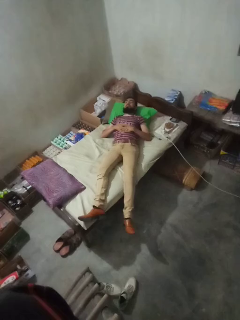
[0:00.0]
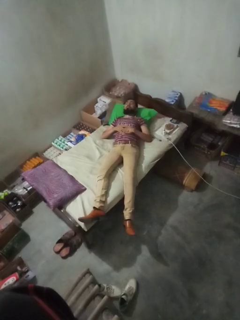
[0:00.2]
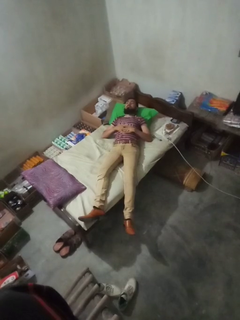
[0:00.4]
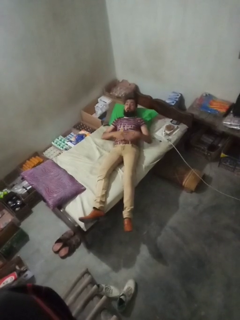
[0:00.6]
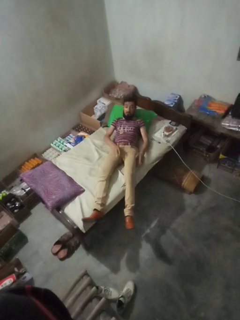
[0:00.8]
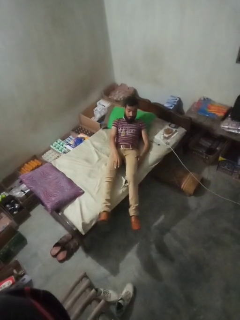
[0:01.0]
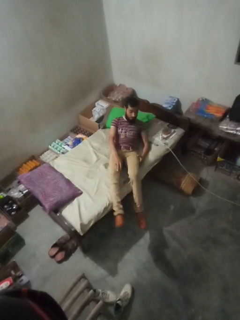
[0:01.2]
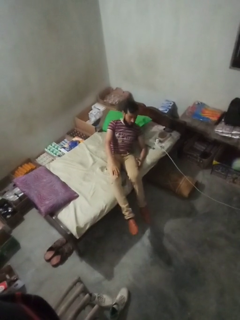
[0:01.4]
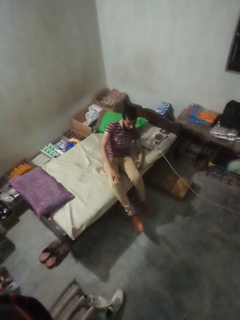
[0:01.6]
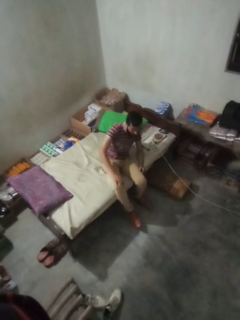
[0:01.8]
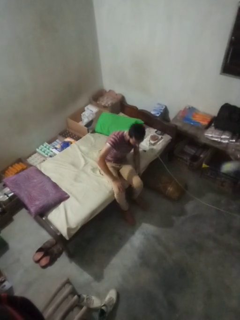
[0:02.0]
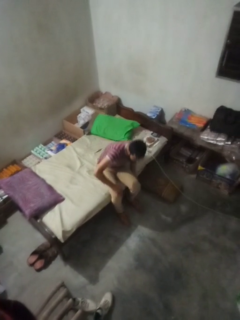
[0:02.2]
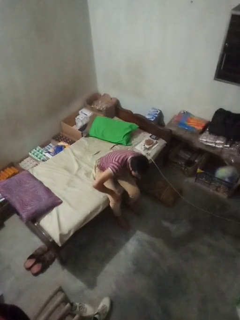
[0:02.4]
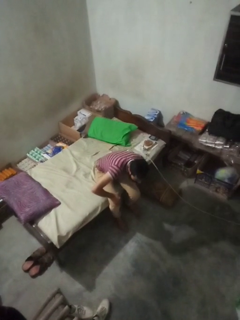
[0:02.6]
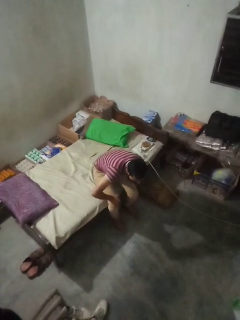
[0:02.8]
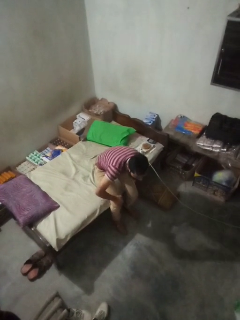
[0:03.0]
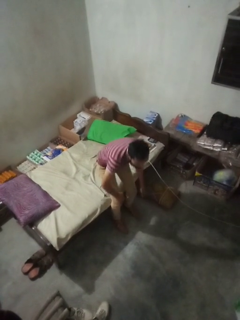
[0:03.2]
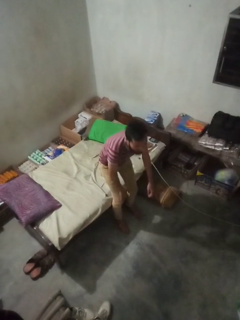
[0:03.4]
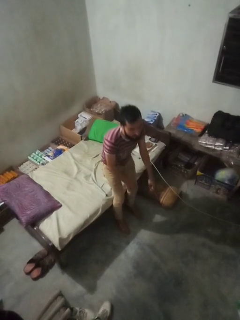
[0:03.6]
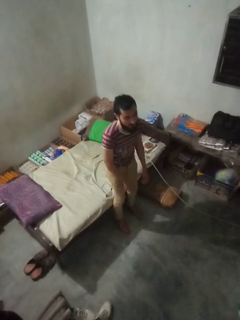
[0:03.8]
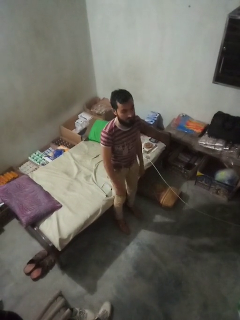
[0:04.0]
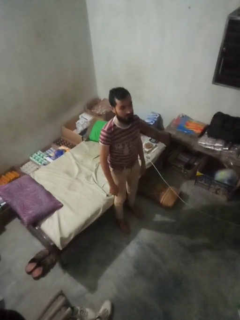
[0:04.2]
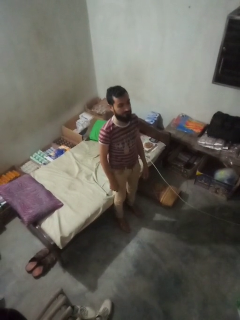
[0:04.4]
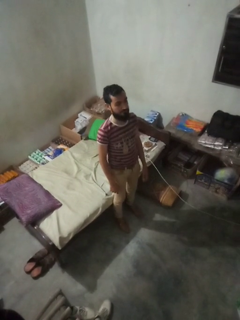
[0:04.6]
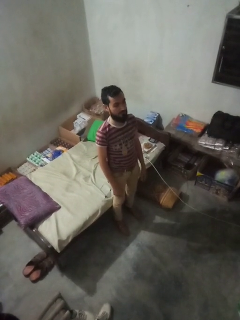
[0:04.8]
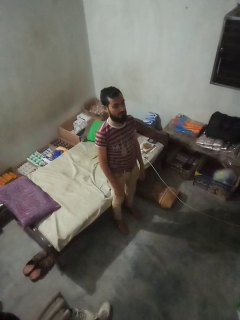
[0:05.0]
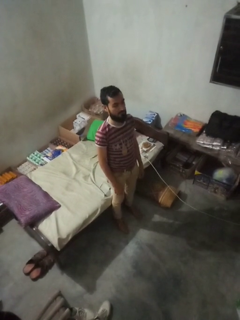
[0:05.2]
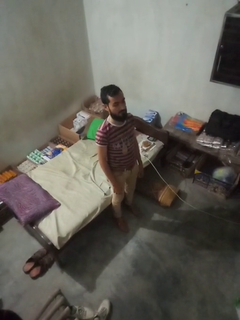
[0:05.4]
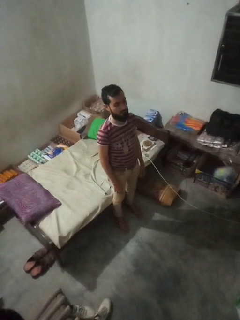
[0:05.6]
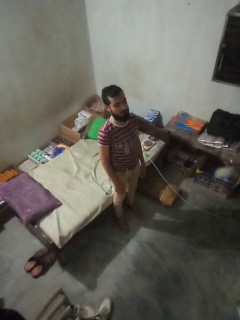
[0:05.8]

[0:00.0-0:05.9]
person stands up

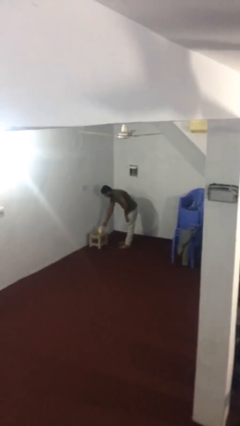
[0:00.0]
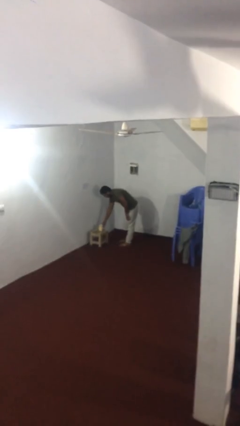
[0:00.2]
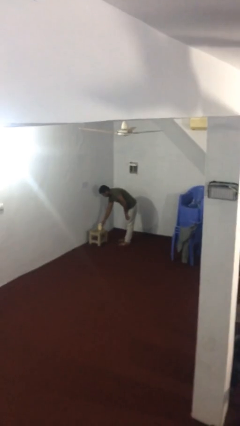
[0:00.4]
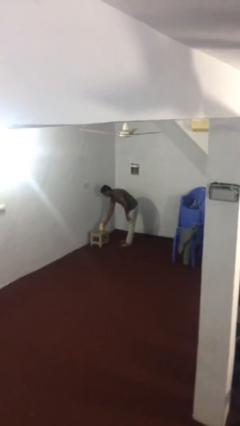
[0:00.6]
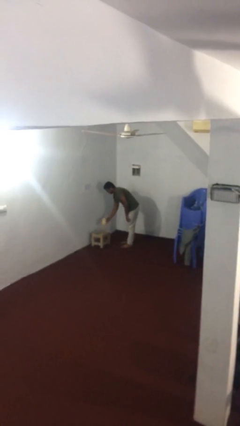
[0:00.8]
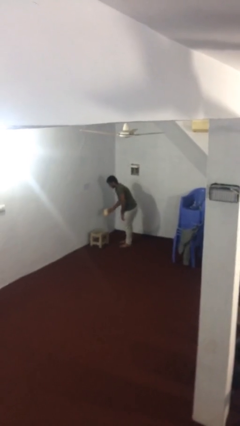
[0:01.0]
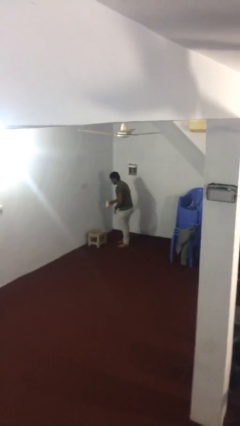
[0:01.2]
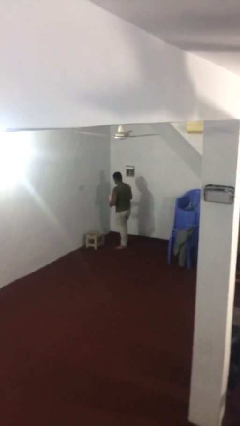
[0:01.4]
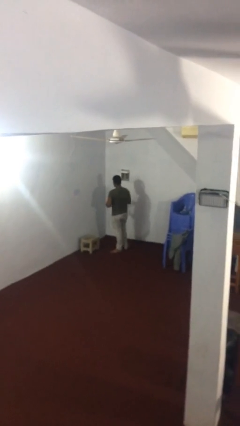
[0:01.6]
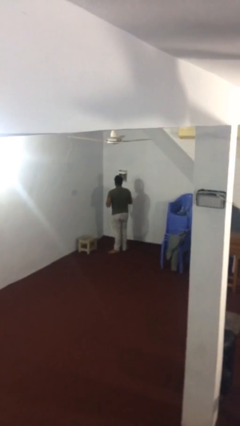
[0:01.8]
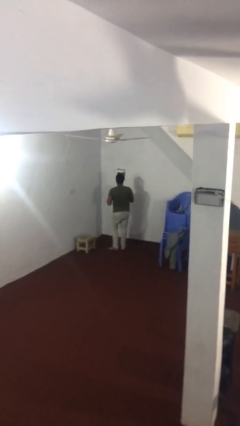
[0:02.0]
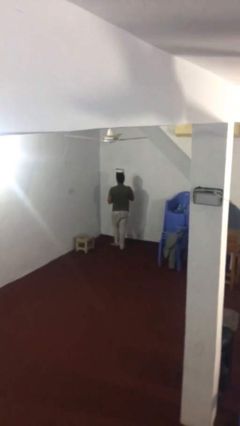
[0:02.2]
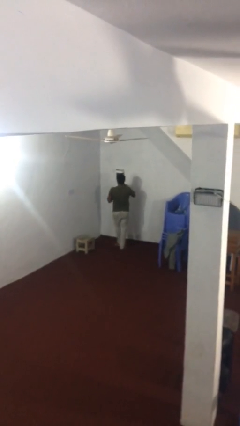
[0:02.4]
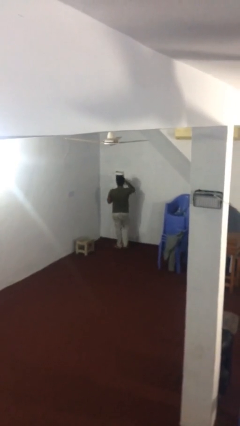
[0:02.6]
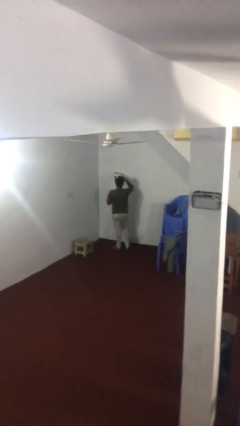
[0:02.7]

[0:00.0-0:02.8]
person picks up object from table

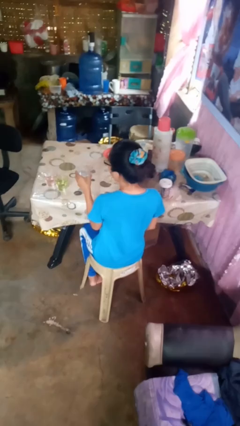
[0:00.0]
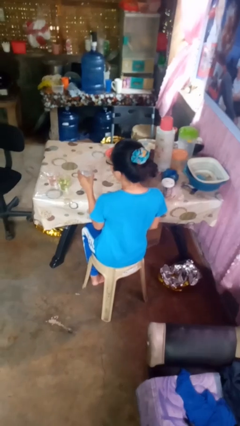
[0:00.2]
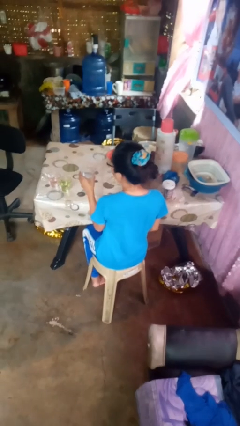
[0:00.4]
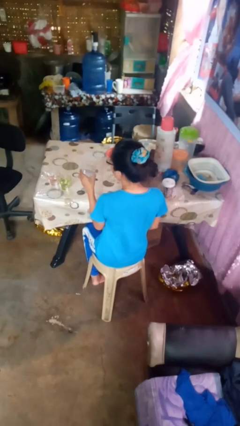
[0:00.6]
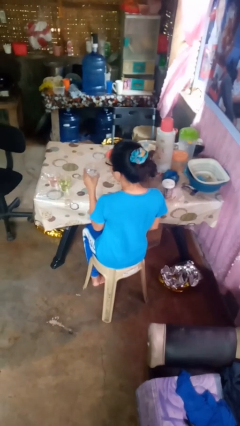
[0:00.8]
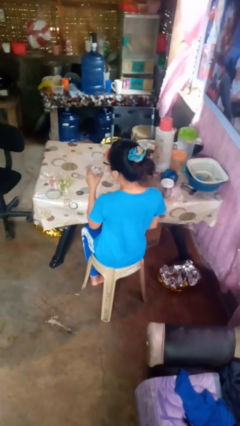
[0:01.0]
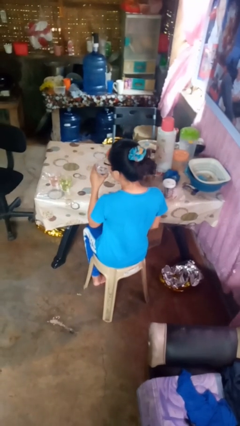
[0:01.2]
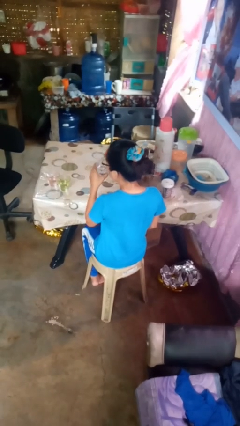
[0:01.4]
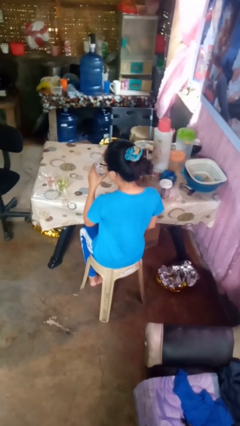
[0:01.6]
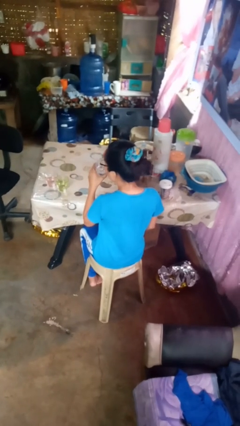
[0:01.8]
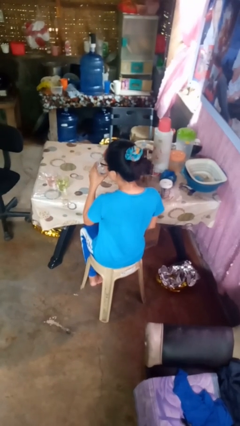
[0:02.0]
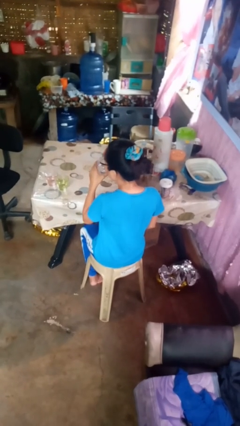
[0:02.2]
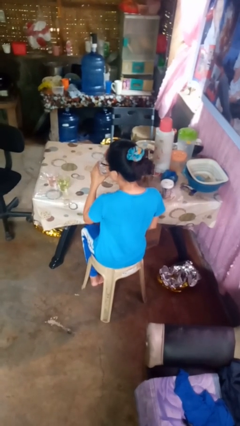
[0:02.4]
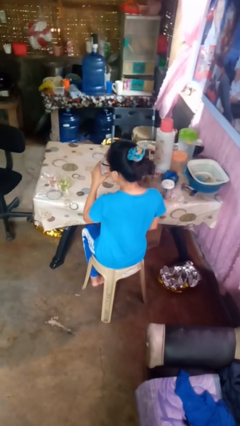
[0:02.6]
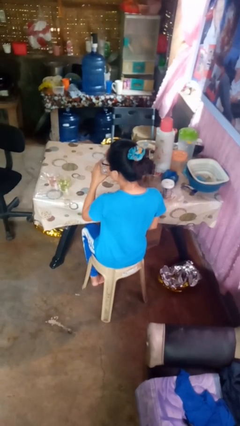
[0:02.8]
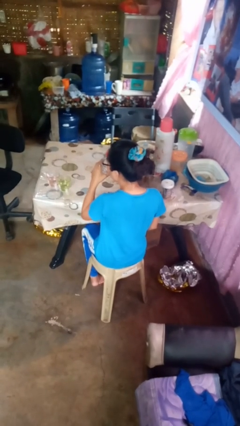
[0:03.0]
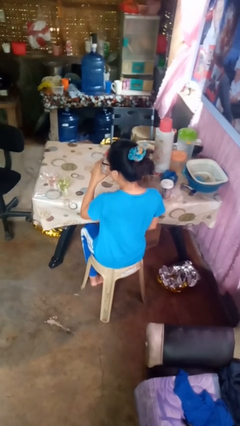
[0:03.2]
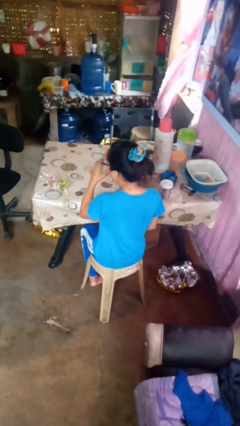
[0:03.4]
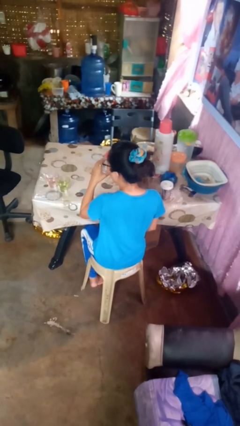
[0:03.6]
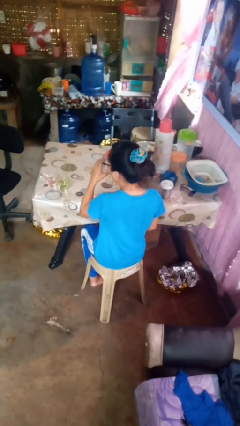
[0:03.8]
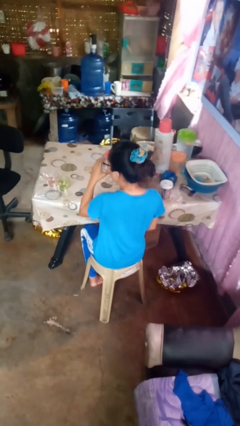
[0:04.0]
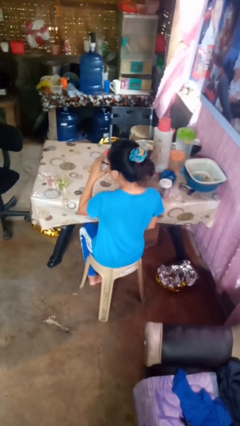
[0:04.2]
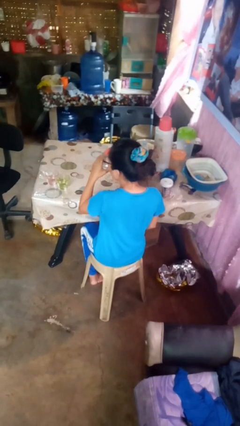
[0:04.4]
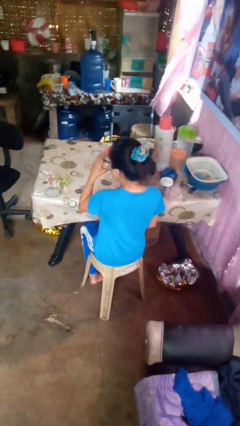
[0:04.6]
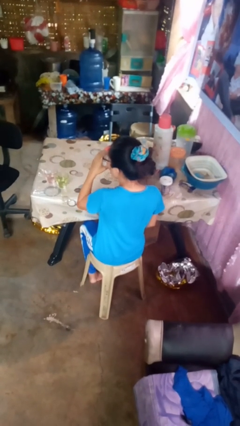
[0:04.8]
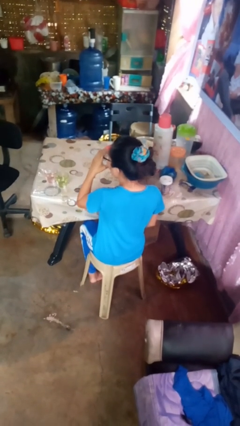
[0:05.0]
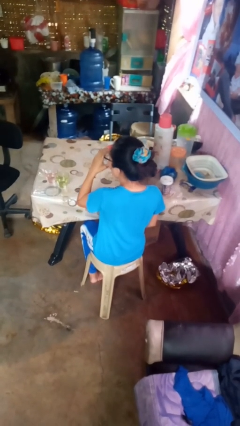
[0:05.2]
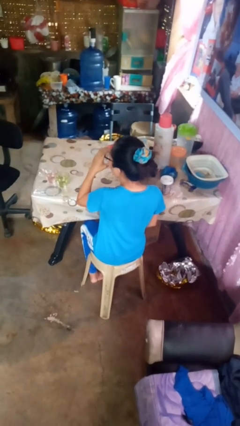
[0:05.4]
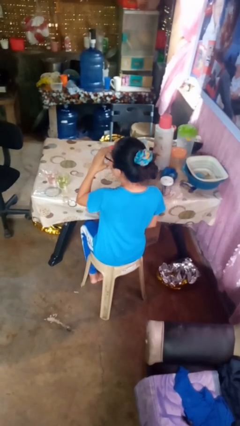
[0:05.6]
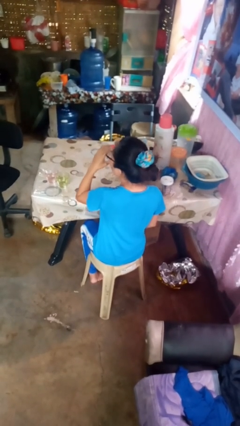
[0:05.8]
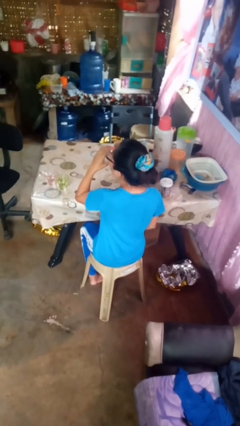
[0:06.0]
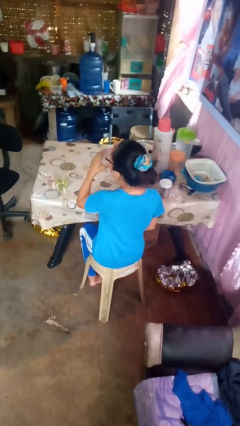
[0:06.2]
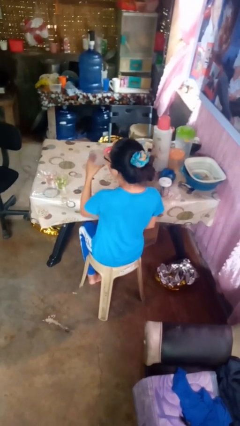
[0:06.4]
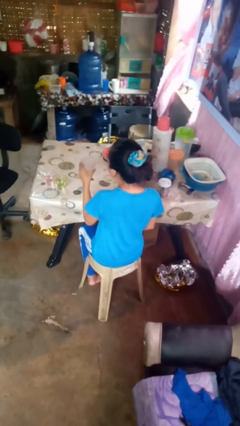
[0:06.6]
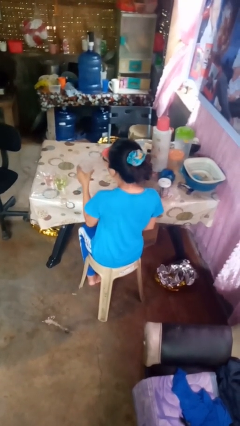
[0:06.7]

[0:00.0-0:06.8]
person drinks from shotglass

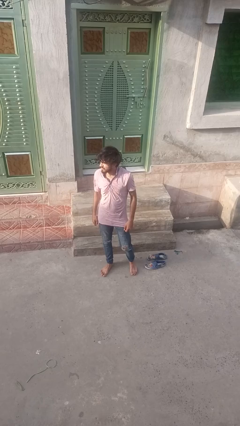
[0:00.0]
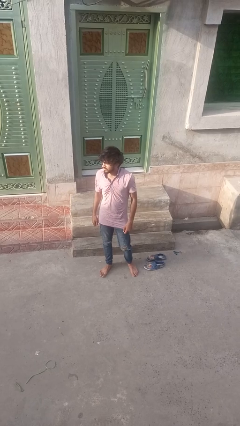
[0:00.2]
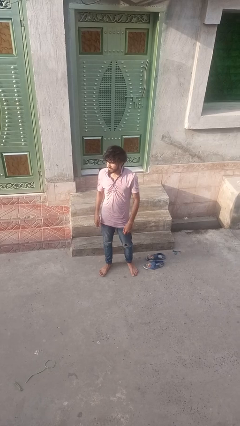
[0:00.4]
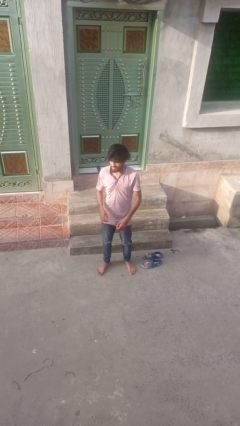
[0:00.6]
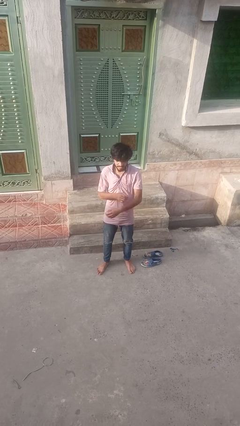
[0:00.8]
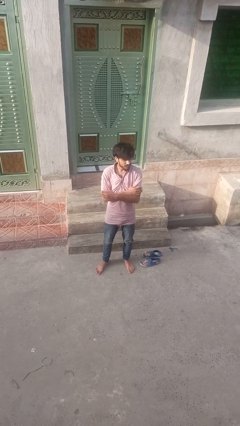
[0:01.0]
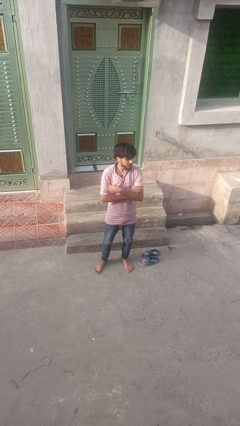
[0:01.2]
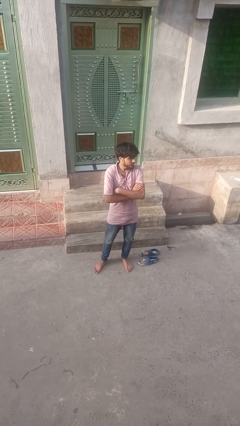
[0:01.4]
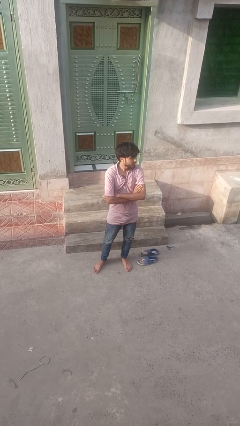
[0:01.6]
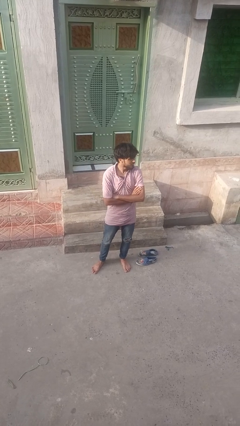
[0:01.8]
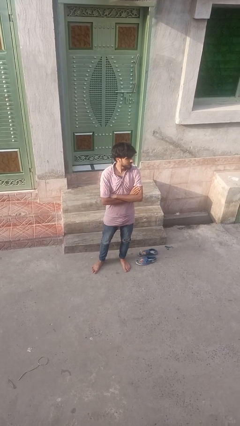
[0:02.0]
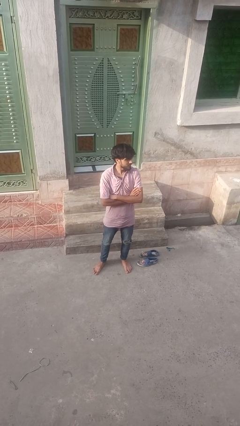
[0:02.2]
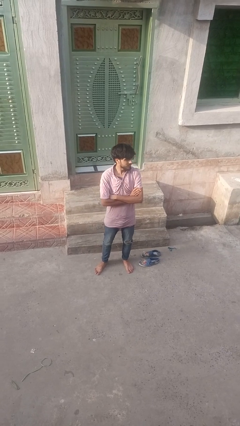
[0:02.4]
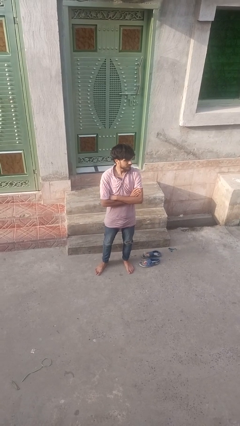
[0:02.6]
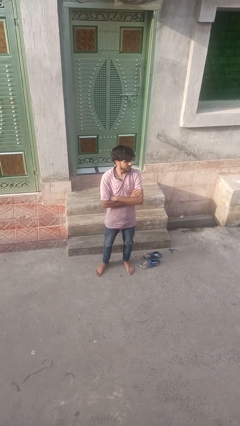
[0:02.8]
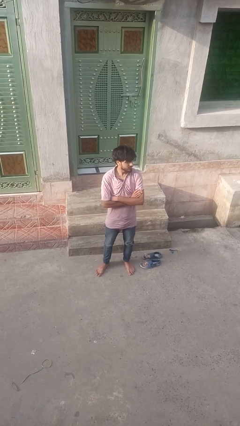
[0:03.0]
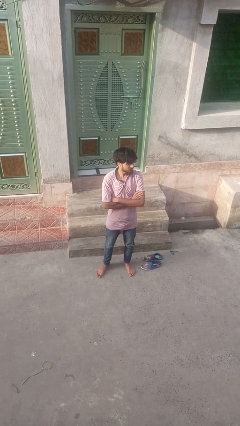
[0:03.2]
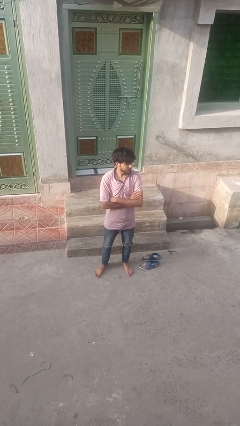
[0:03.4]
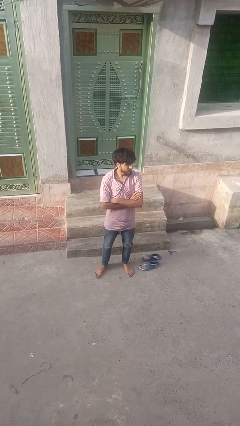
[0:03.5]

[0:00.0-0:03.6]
person crosses arms
